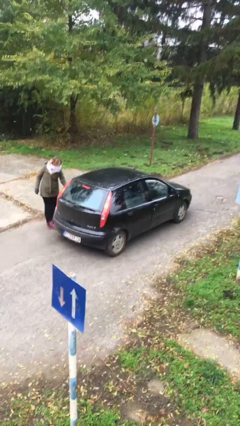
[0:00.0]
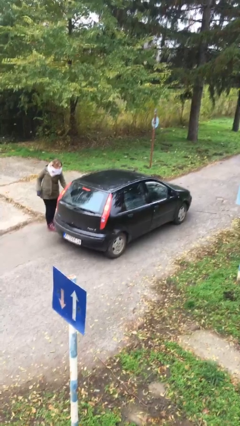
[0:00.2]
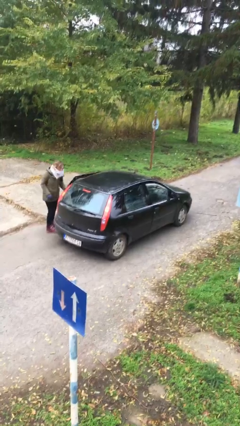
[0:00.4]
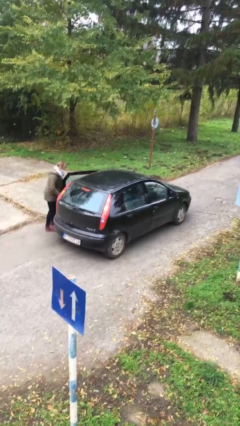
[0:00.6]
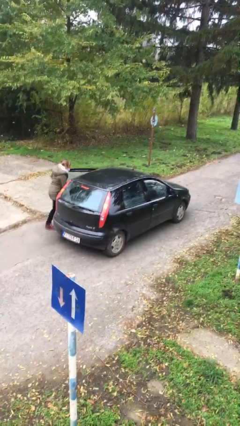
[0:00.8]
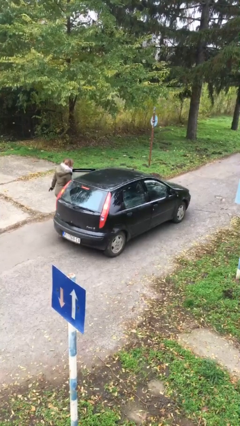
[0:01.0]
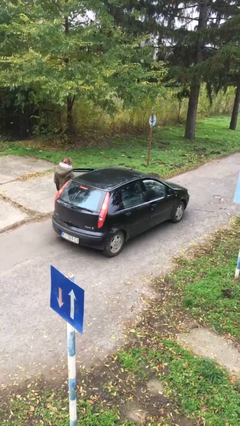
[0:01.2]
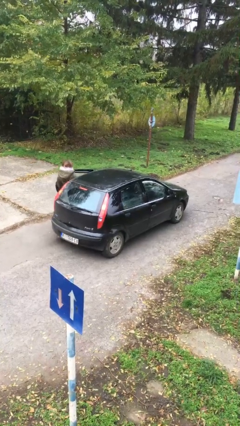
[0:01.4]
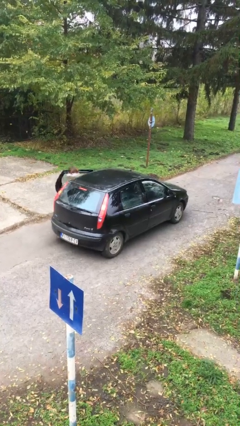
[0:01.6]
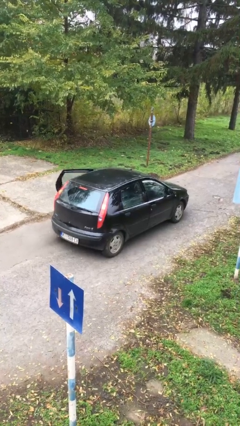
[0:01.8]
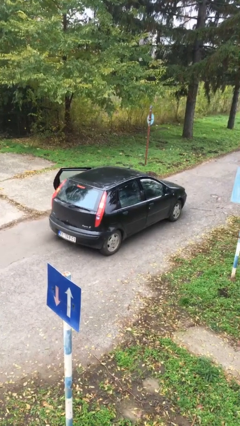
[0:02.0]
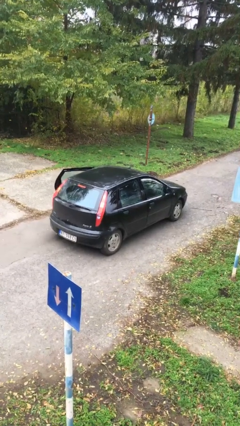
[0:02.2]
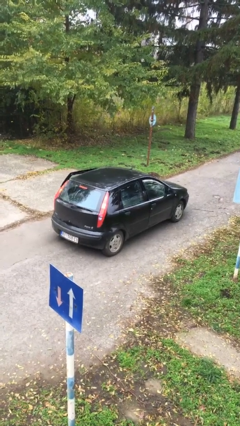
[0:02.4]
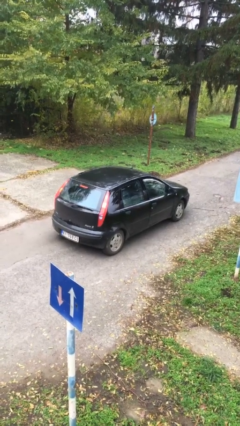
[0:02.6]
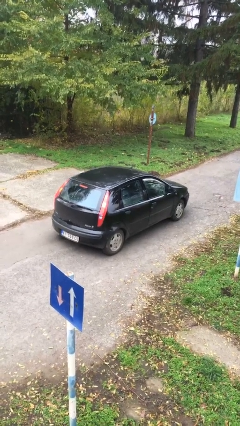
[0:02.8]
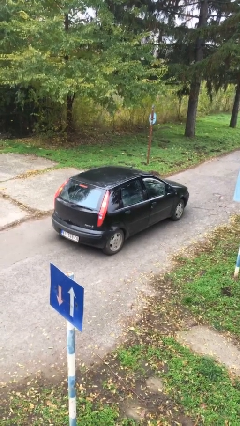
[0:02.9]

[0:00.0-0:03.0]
car picks up person

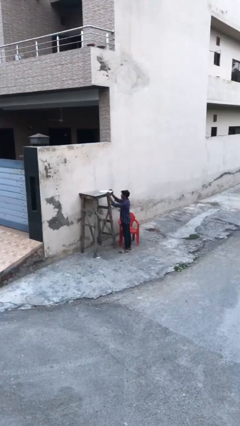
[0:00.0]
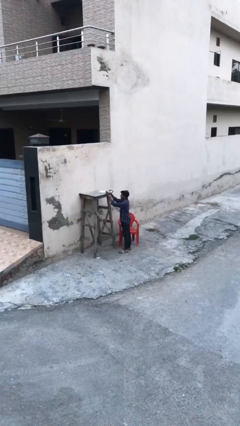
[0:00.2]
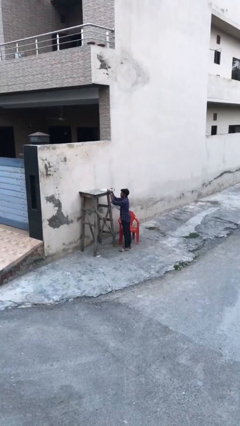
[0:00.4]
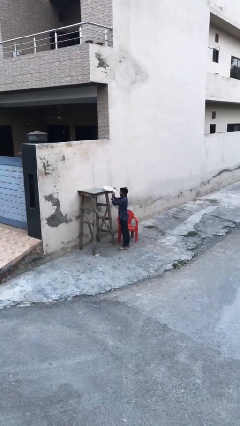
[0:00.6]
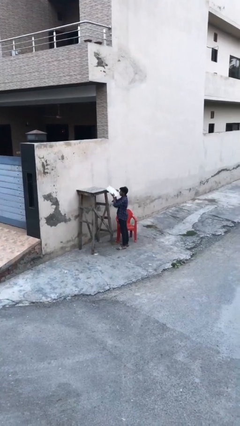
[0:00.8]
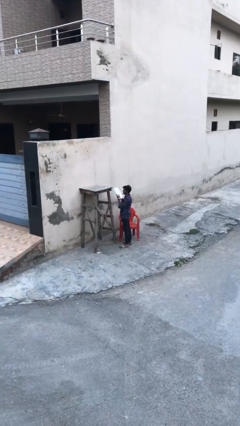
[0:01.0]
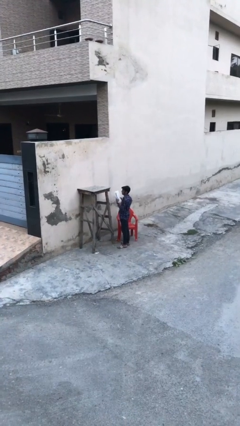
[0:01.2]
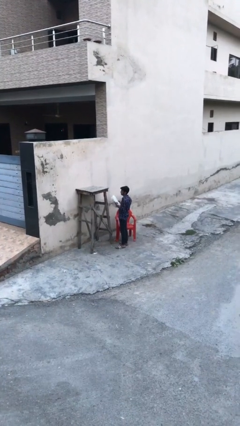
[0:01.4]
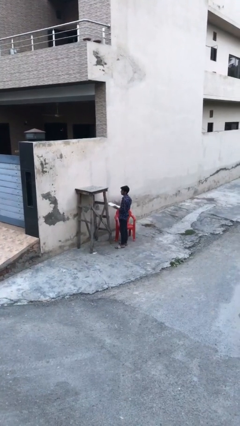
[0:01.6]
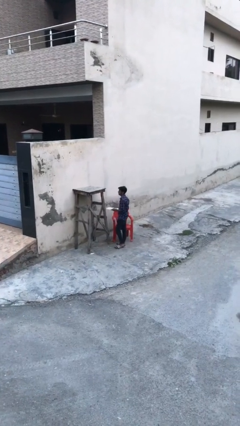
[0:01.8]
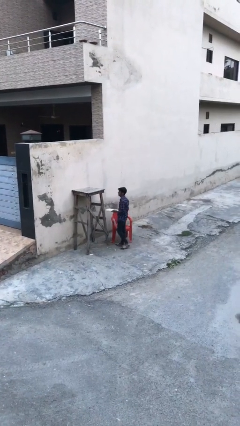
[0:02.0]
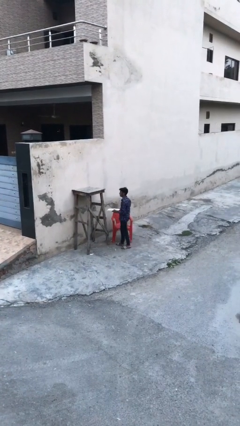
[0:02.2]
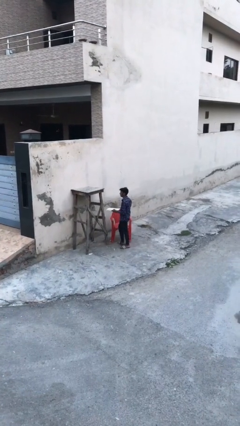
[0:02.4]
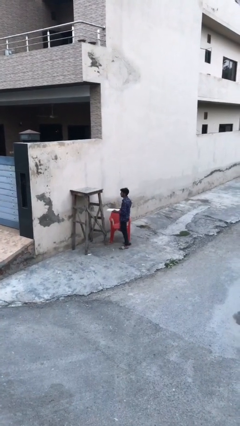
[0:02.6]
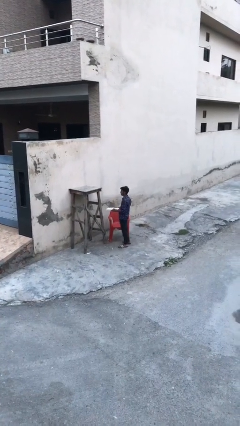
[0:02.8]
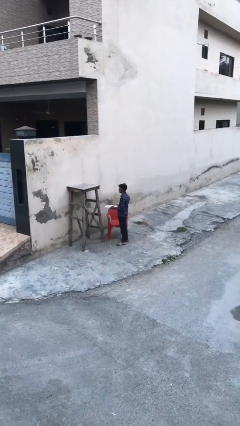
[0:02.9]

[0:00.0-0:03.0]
person picks up object from shelf

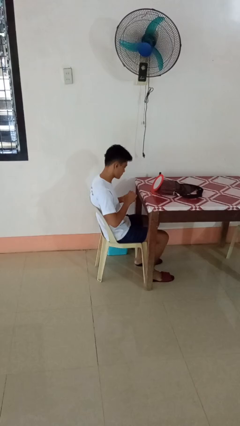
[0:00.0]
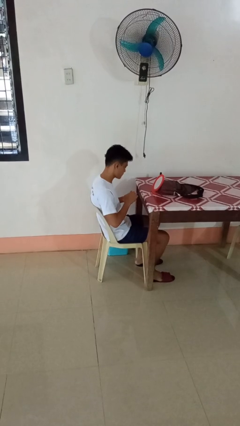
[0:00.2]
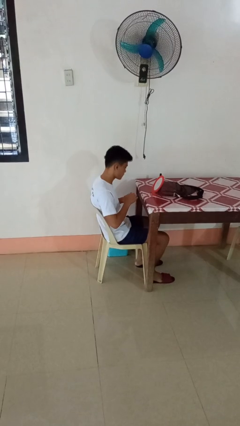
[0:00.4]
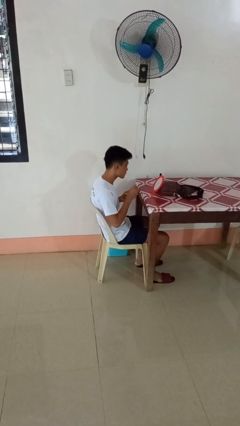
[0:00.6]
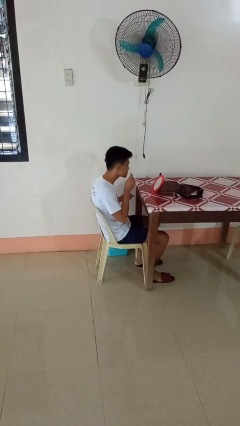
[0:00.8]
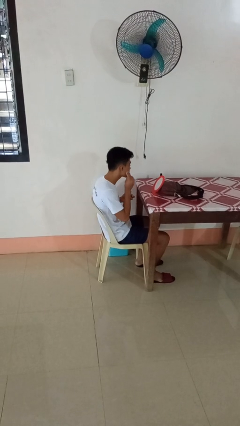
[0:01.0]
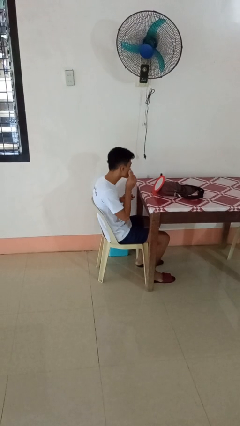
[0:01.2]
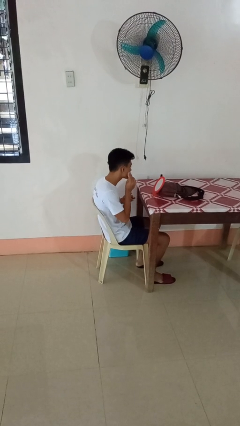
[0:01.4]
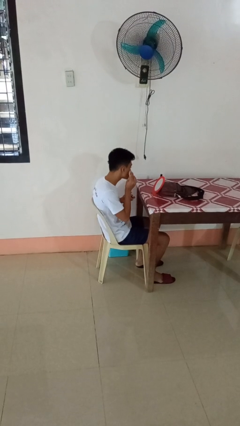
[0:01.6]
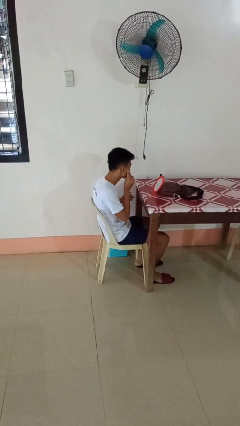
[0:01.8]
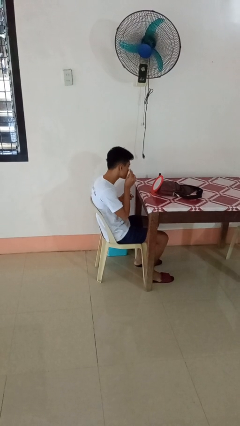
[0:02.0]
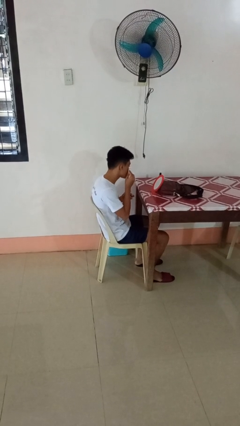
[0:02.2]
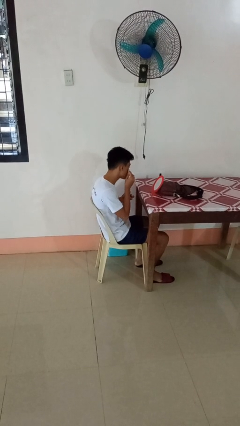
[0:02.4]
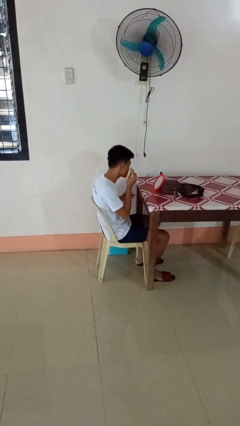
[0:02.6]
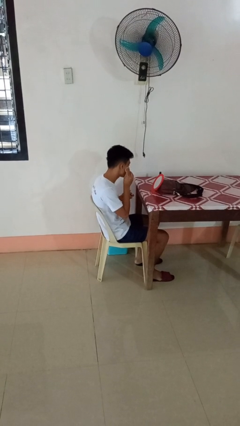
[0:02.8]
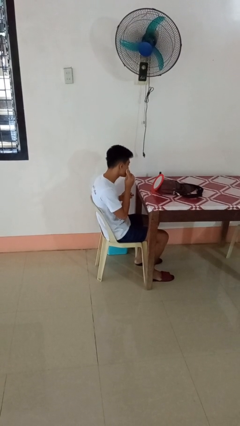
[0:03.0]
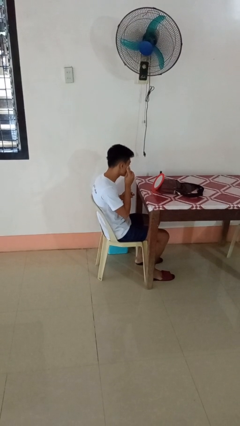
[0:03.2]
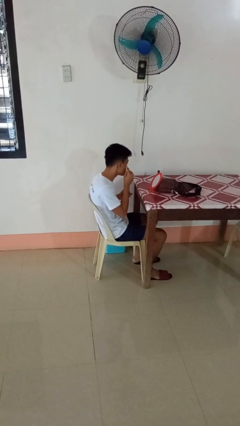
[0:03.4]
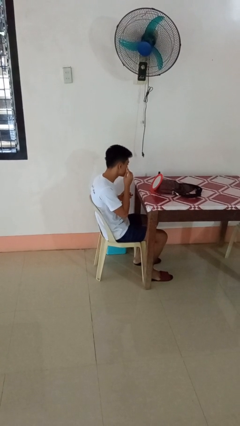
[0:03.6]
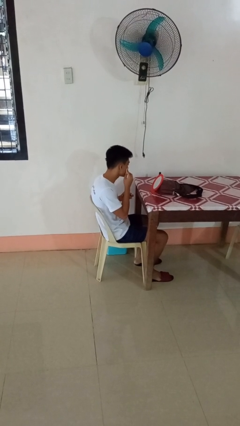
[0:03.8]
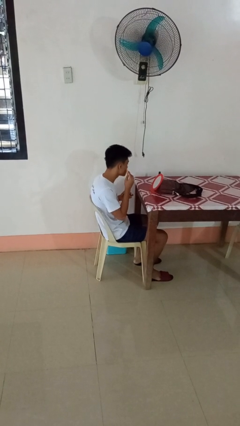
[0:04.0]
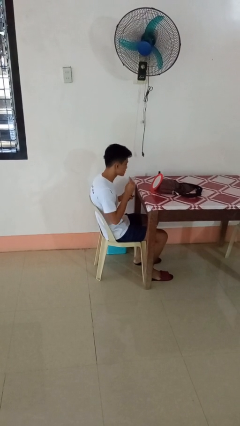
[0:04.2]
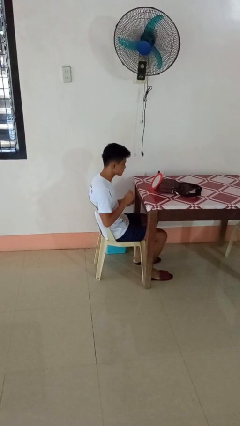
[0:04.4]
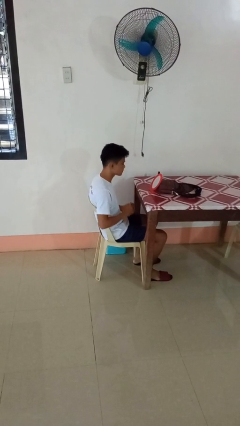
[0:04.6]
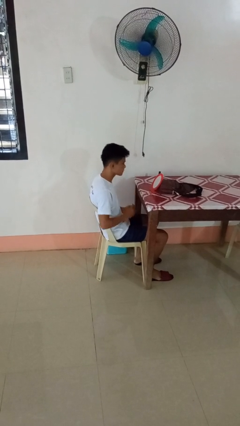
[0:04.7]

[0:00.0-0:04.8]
person applies foundation makeup

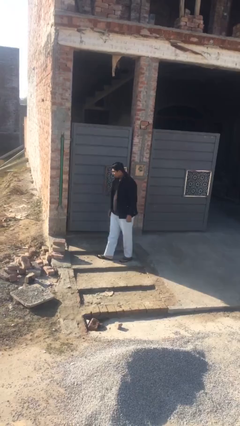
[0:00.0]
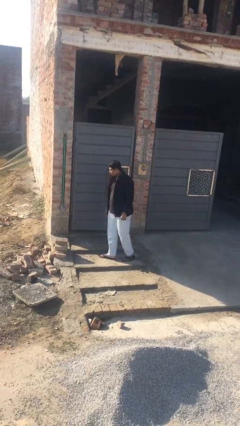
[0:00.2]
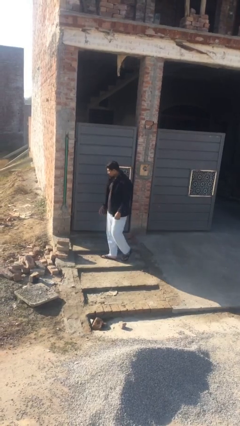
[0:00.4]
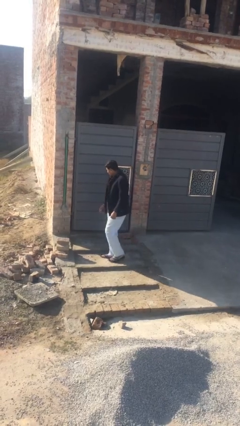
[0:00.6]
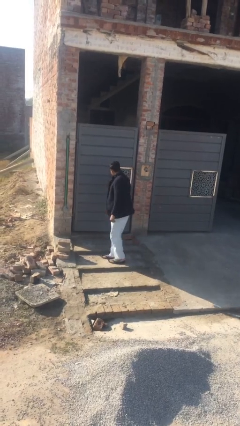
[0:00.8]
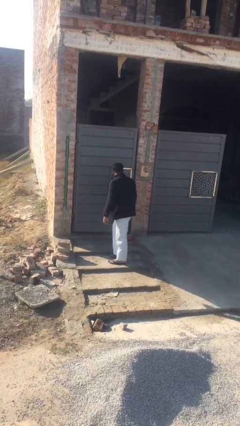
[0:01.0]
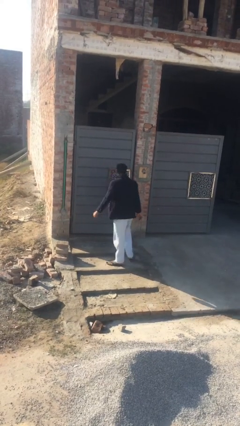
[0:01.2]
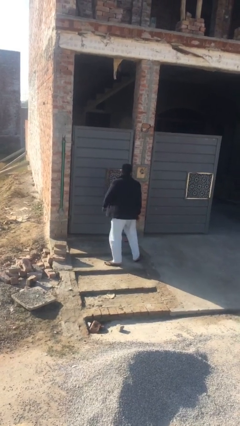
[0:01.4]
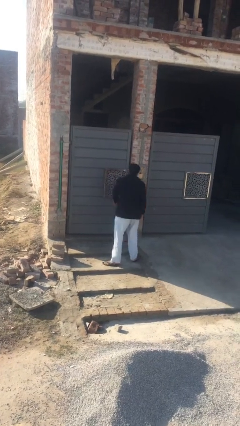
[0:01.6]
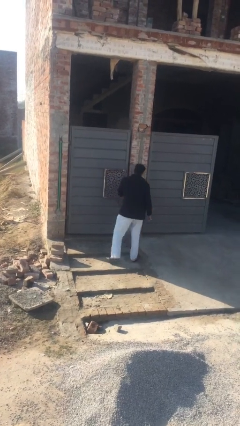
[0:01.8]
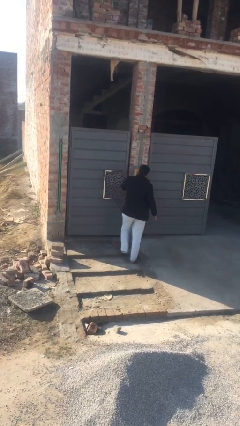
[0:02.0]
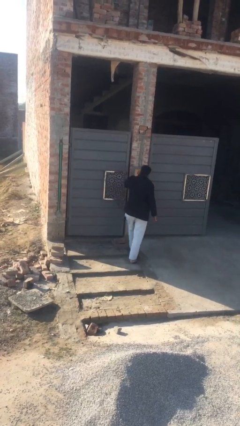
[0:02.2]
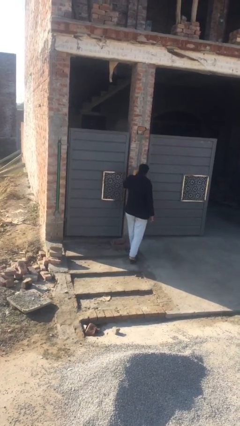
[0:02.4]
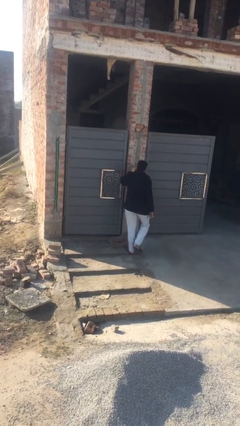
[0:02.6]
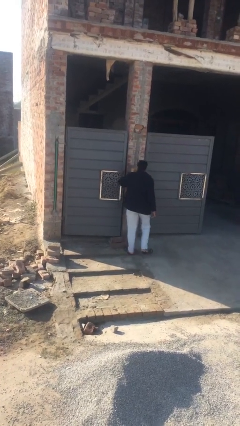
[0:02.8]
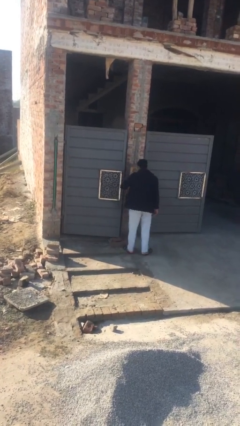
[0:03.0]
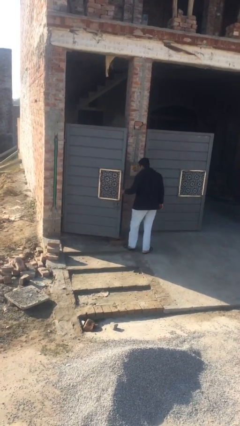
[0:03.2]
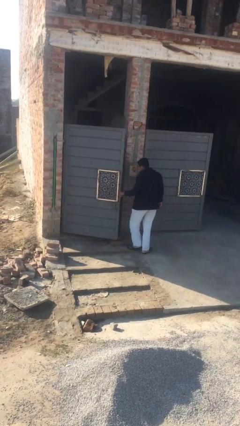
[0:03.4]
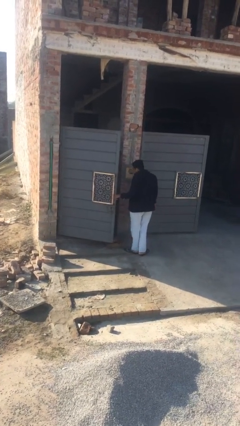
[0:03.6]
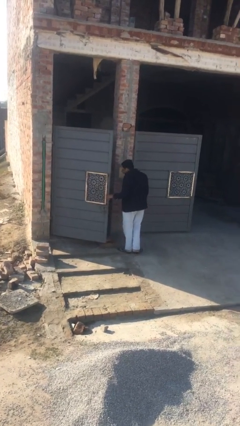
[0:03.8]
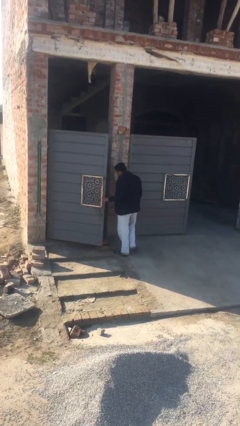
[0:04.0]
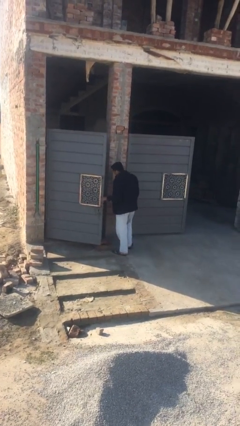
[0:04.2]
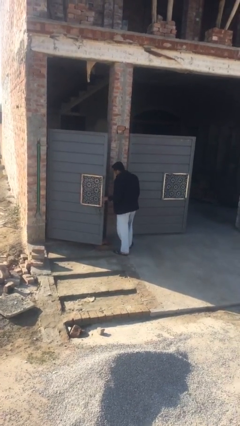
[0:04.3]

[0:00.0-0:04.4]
person opens facility door

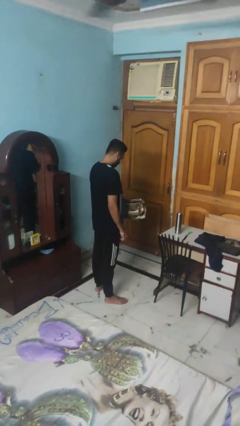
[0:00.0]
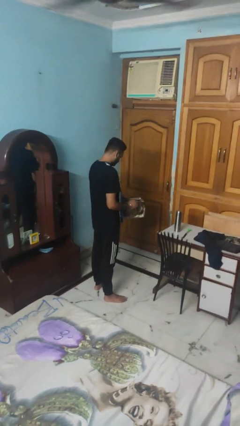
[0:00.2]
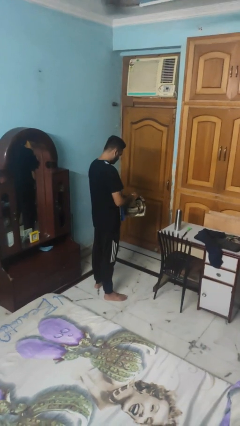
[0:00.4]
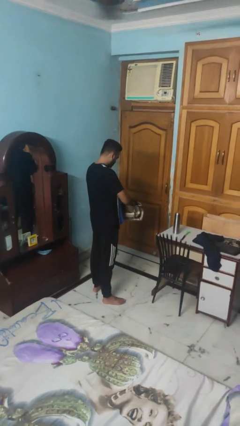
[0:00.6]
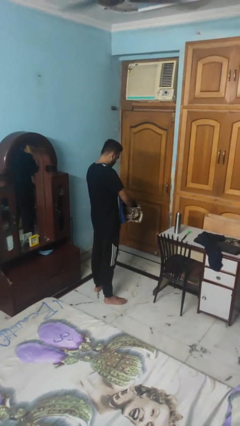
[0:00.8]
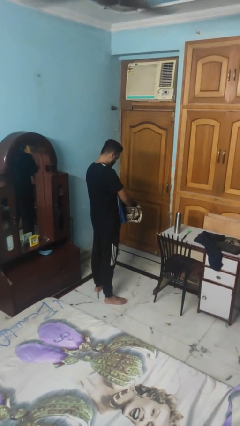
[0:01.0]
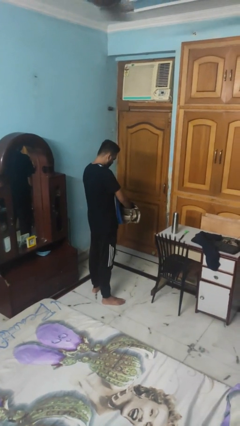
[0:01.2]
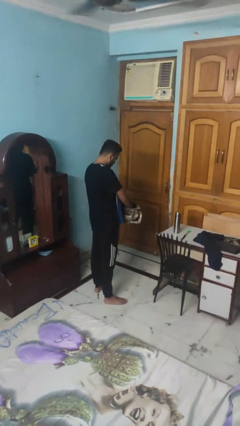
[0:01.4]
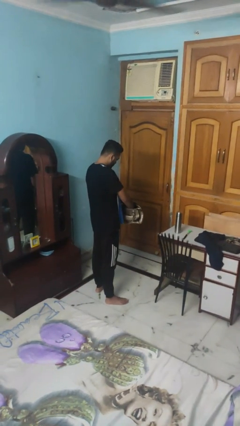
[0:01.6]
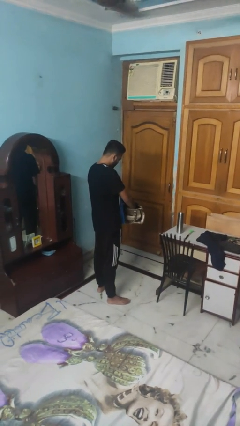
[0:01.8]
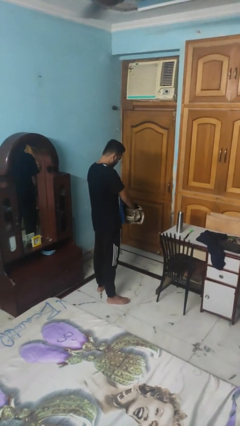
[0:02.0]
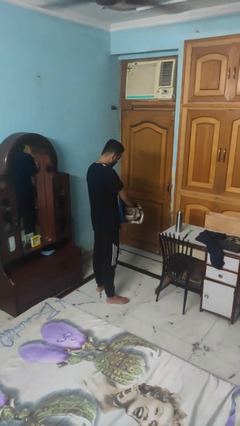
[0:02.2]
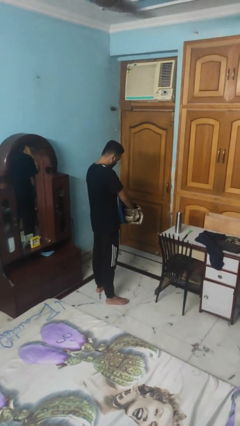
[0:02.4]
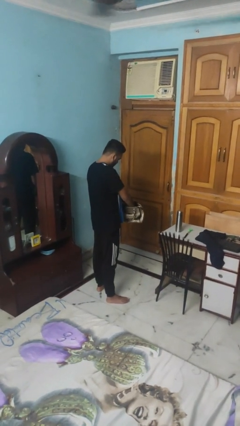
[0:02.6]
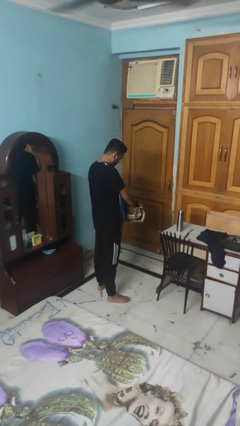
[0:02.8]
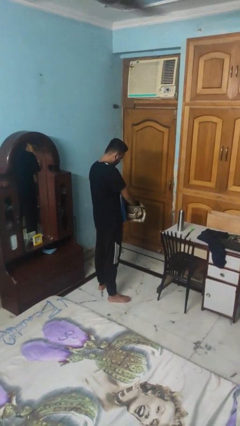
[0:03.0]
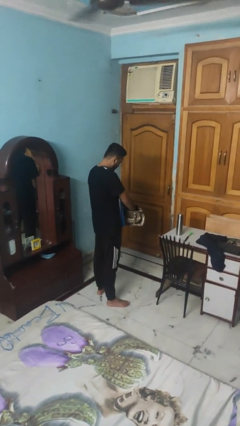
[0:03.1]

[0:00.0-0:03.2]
person searches in purse
